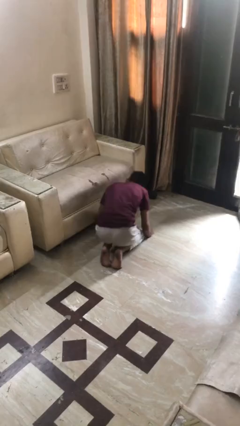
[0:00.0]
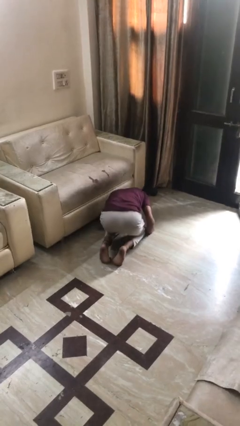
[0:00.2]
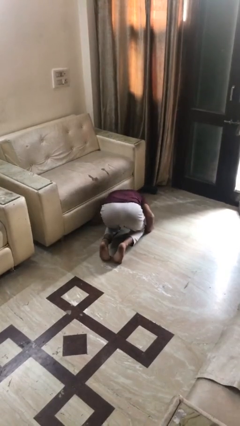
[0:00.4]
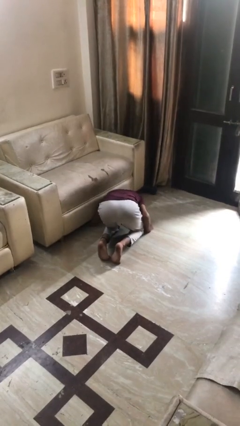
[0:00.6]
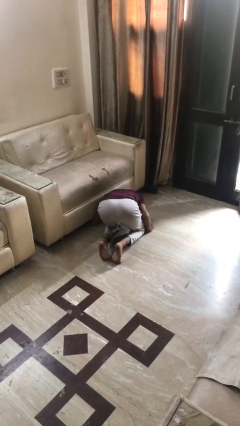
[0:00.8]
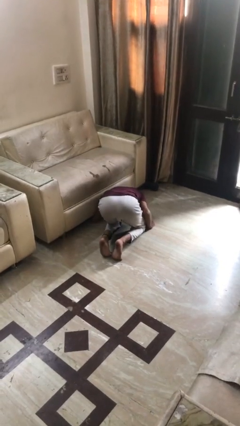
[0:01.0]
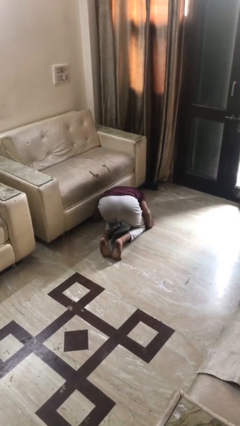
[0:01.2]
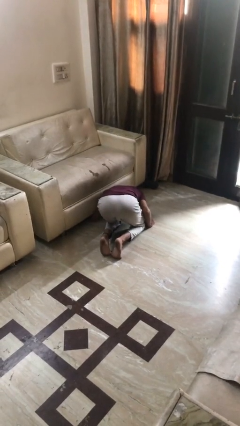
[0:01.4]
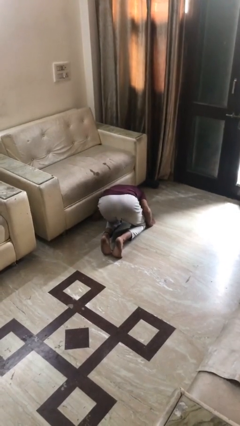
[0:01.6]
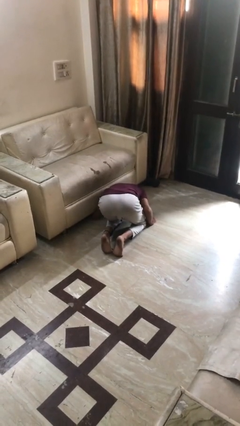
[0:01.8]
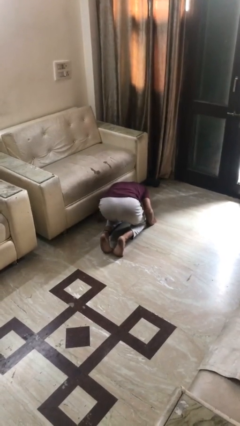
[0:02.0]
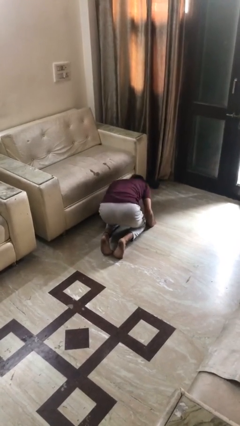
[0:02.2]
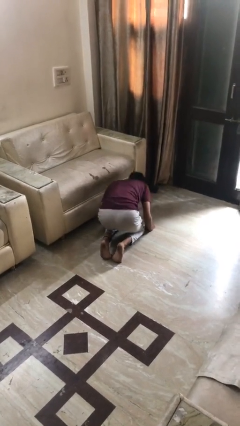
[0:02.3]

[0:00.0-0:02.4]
person searches under couch

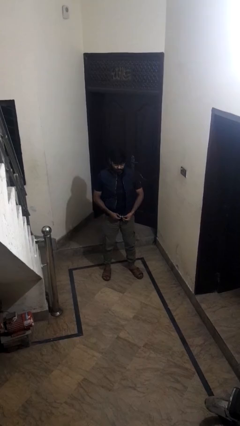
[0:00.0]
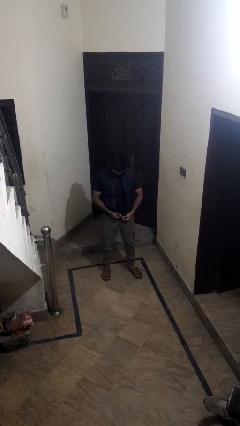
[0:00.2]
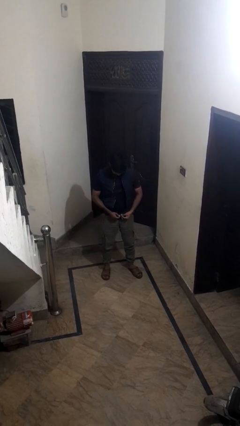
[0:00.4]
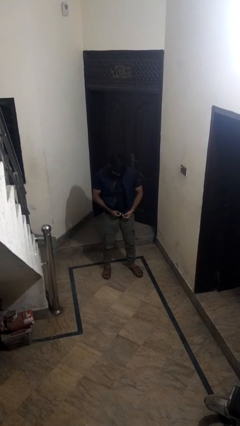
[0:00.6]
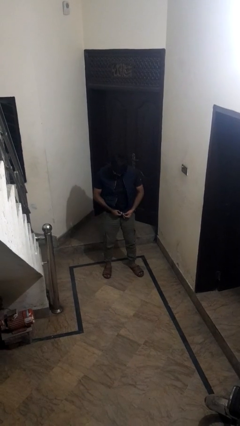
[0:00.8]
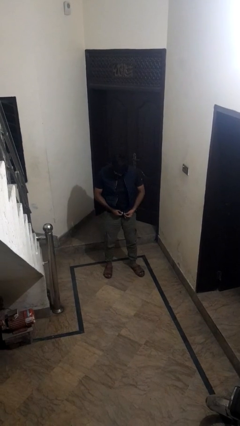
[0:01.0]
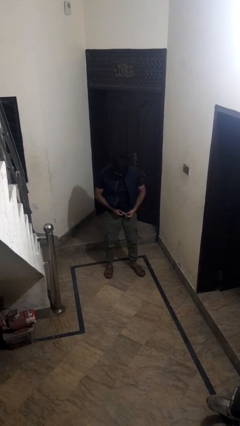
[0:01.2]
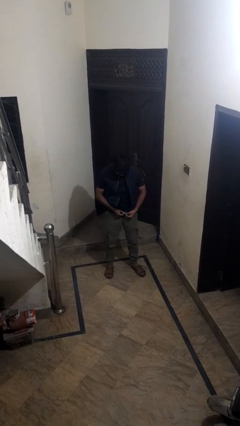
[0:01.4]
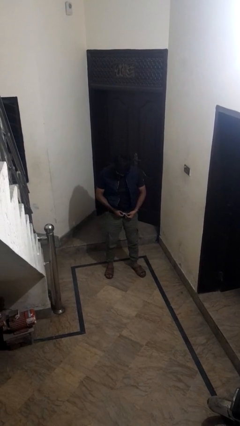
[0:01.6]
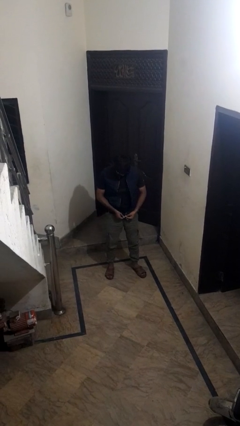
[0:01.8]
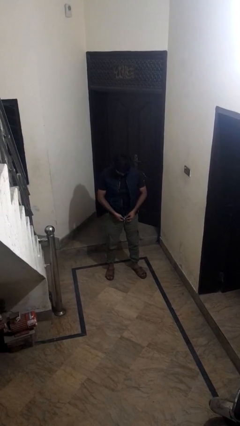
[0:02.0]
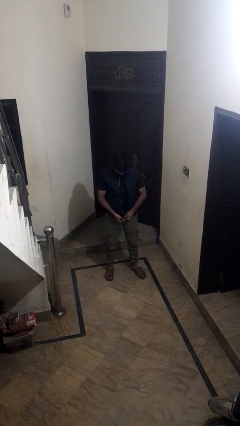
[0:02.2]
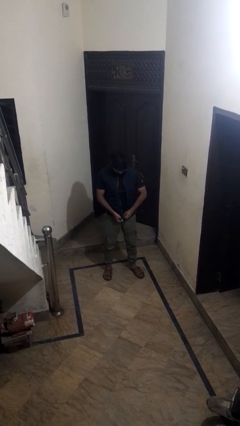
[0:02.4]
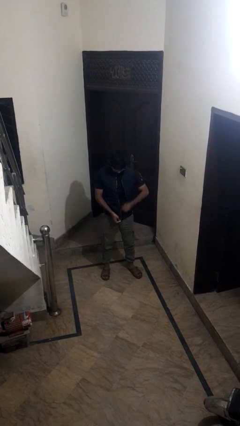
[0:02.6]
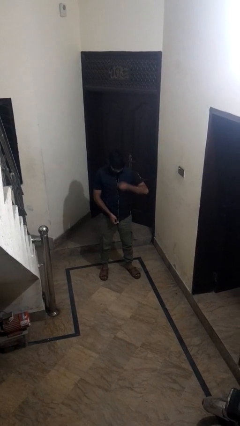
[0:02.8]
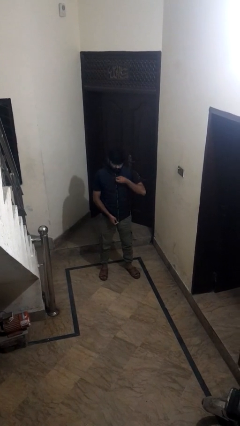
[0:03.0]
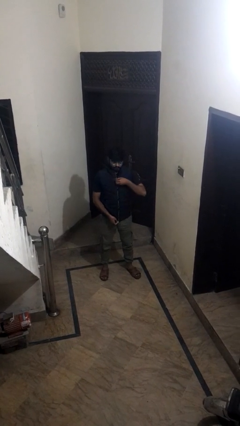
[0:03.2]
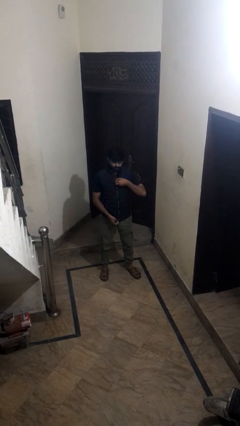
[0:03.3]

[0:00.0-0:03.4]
person zips up jacket

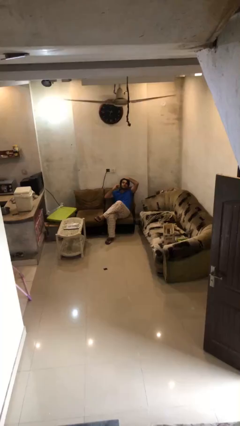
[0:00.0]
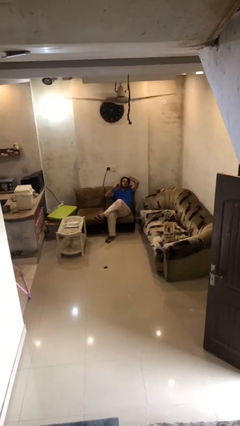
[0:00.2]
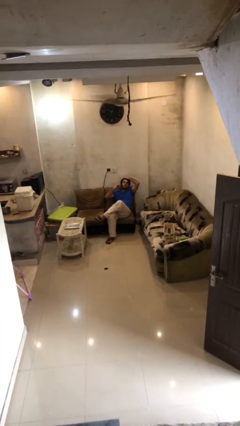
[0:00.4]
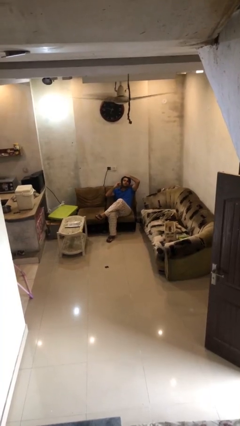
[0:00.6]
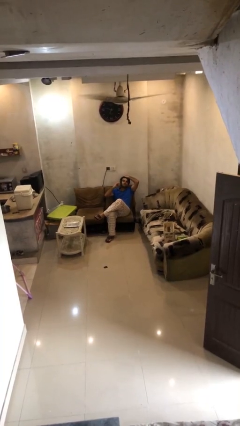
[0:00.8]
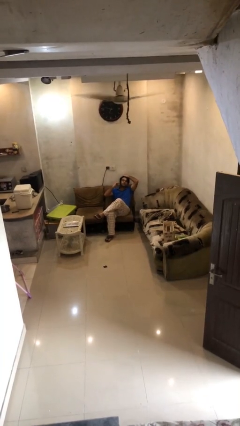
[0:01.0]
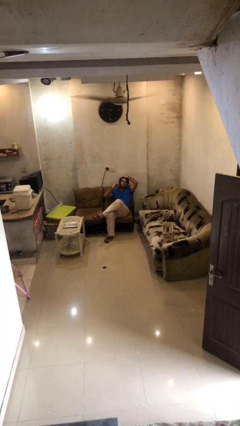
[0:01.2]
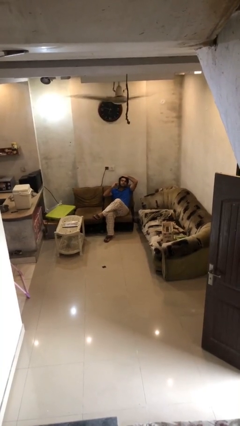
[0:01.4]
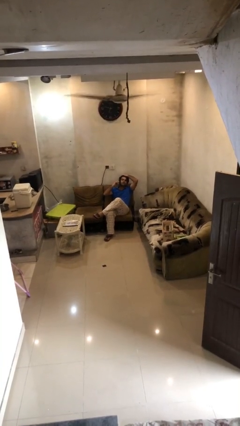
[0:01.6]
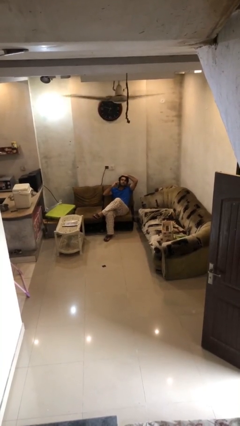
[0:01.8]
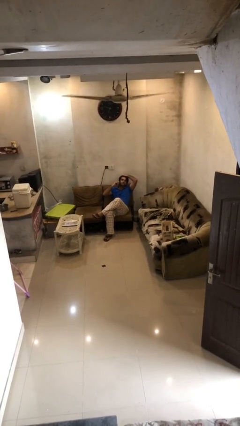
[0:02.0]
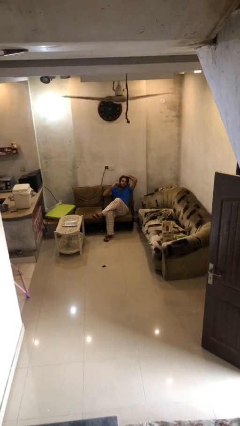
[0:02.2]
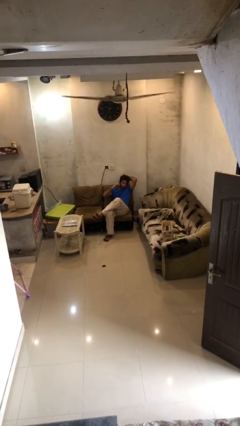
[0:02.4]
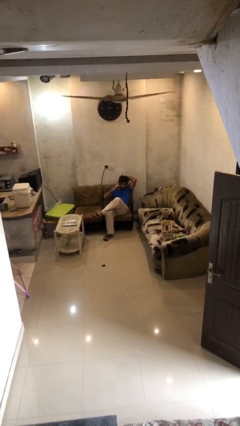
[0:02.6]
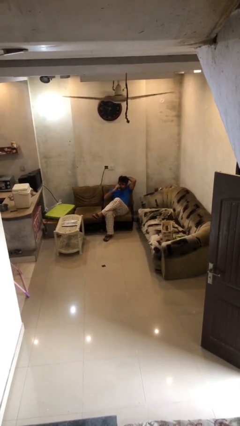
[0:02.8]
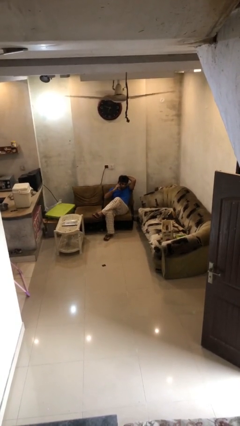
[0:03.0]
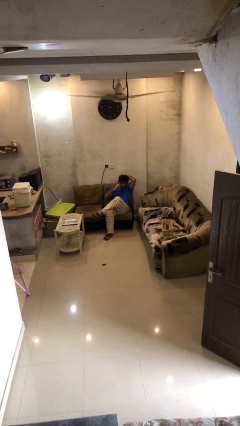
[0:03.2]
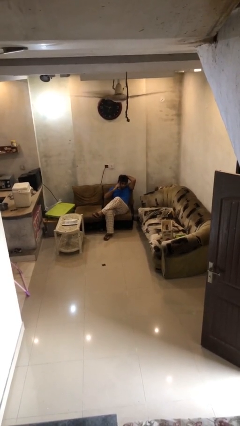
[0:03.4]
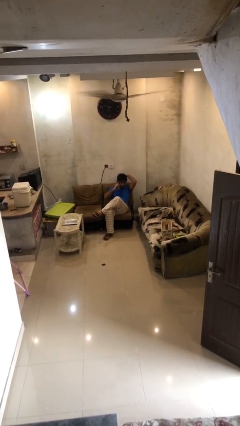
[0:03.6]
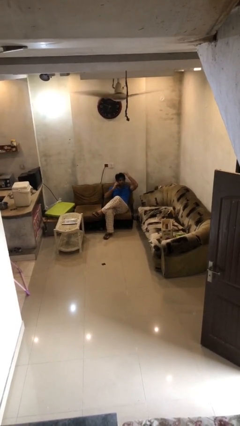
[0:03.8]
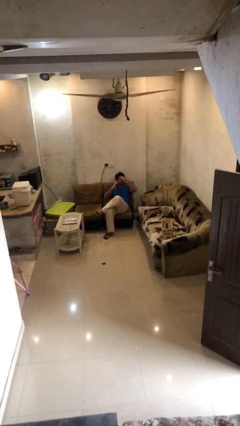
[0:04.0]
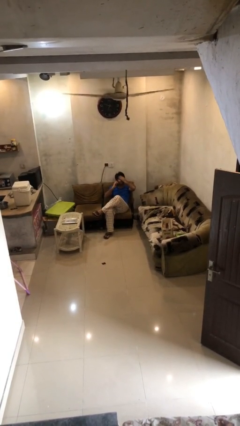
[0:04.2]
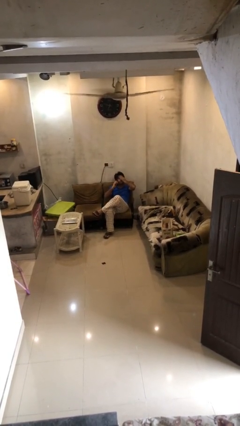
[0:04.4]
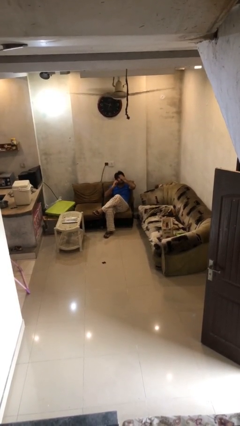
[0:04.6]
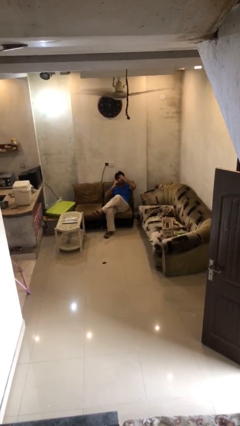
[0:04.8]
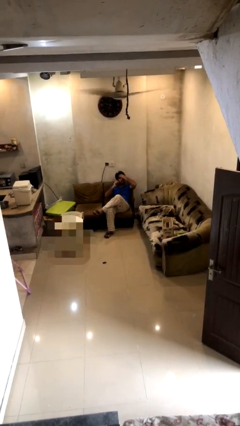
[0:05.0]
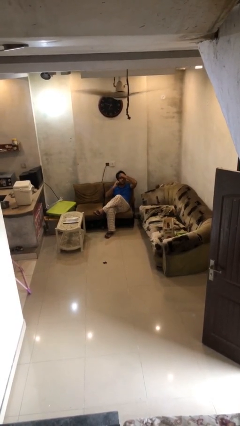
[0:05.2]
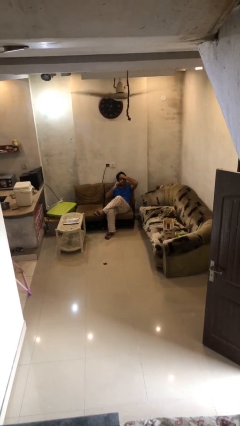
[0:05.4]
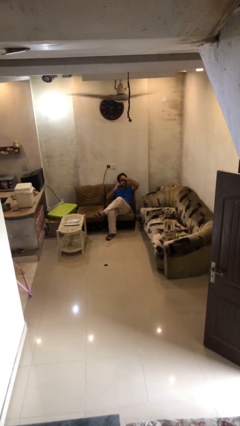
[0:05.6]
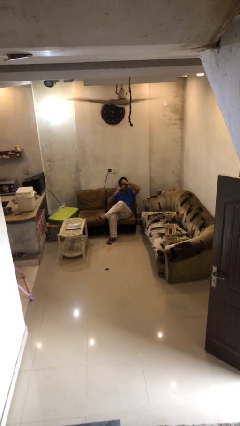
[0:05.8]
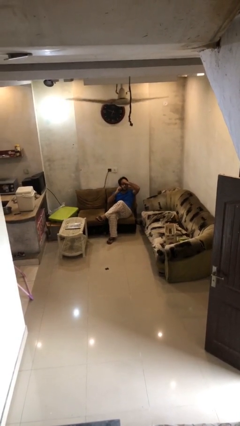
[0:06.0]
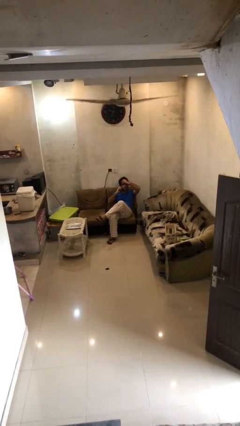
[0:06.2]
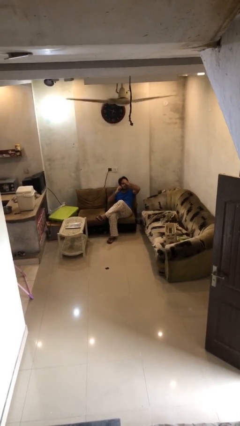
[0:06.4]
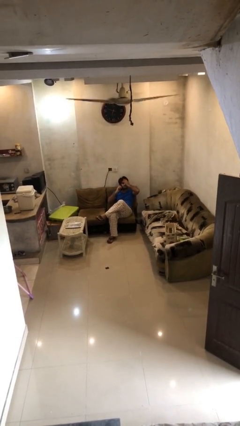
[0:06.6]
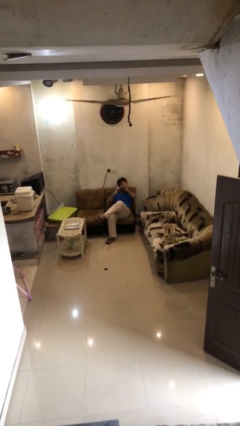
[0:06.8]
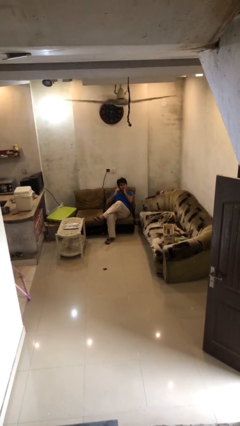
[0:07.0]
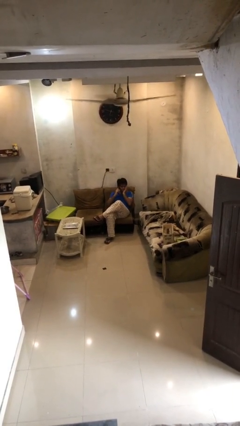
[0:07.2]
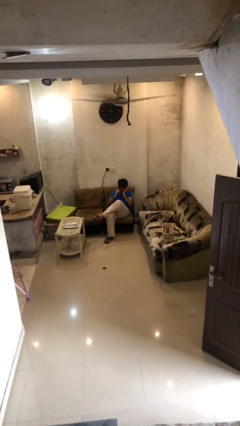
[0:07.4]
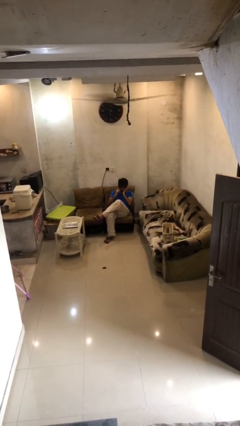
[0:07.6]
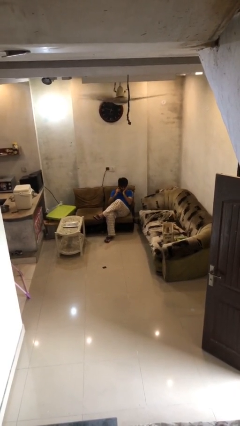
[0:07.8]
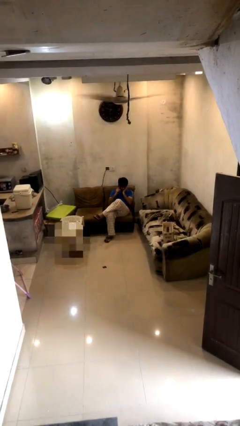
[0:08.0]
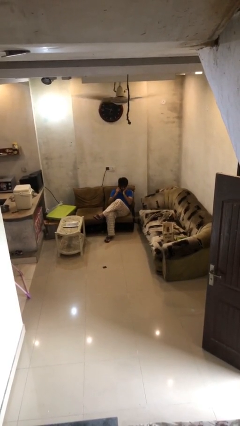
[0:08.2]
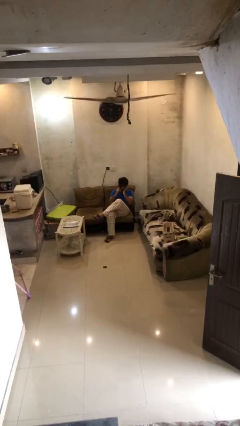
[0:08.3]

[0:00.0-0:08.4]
person talks on phone

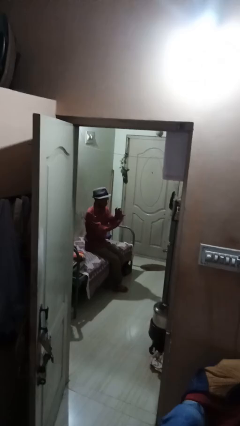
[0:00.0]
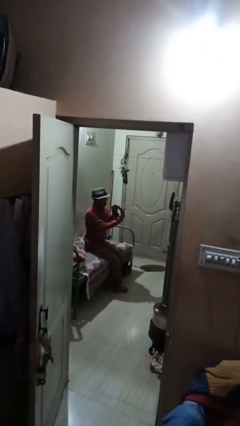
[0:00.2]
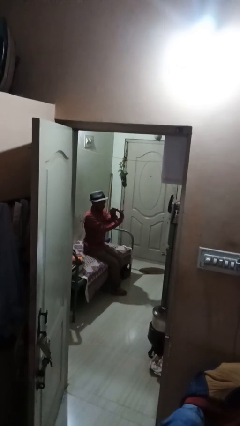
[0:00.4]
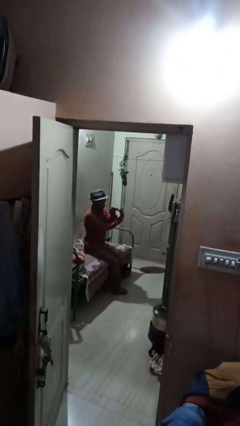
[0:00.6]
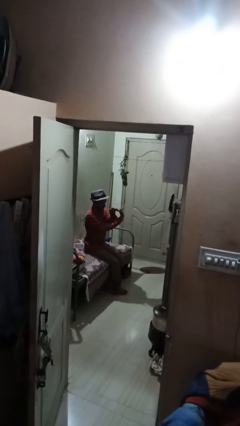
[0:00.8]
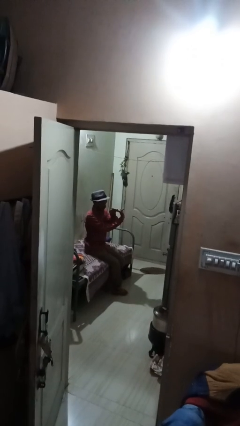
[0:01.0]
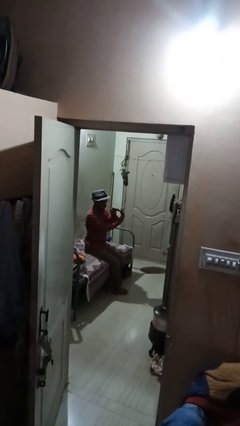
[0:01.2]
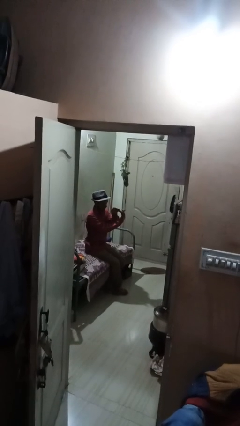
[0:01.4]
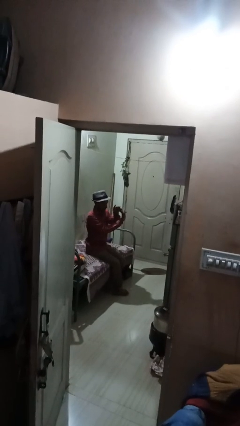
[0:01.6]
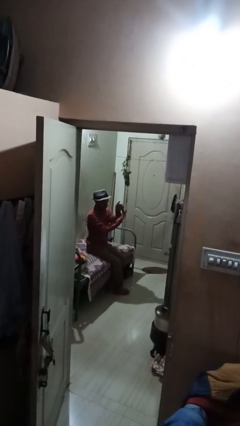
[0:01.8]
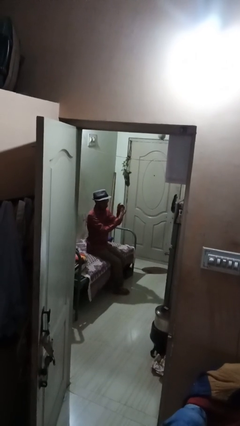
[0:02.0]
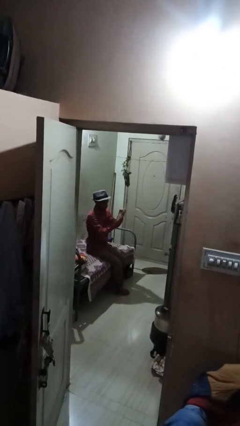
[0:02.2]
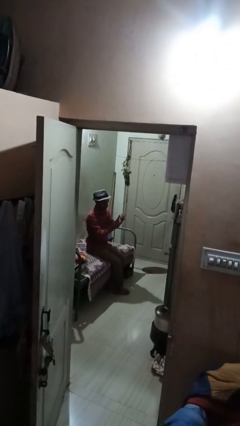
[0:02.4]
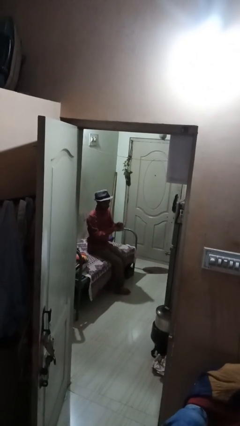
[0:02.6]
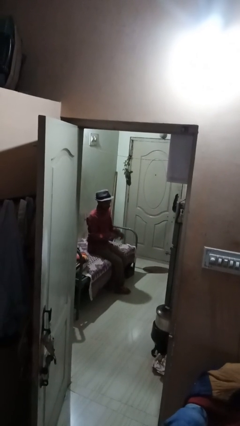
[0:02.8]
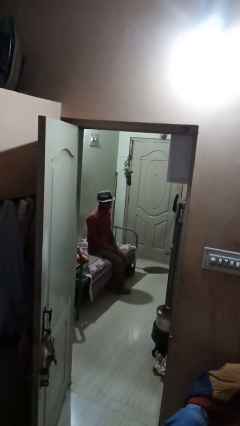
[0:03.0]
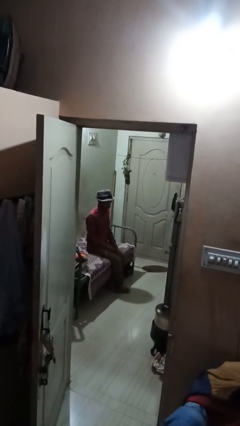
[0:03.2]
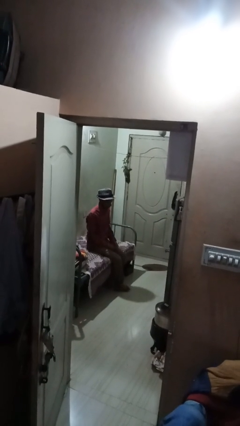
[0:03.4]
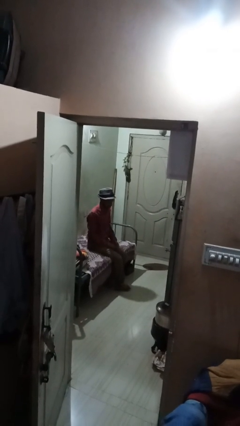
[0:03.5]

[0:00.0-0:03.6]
person cracks knuckles
